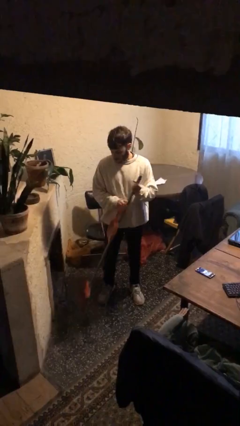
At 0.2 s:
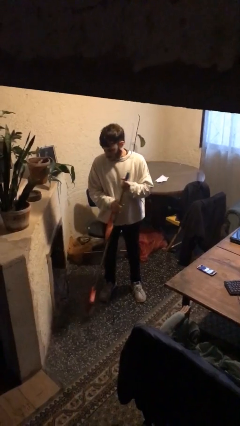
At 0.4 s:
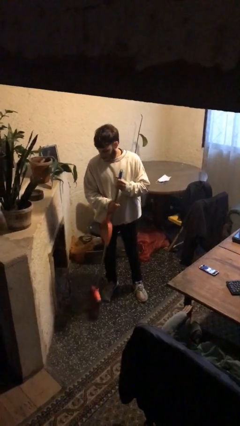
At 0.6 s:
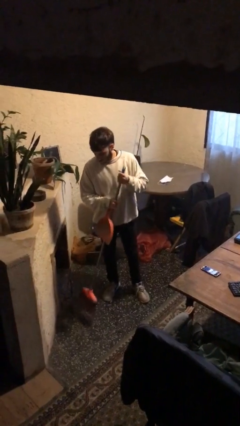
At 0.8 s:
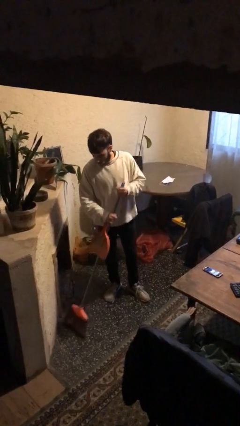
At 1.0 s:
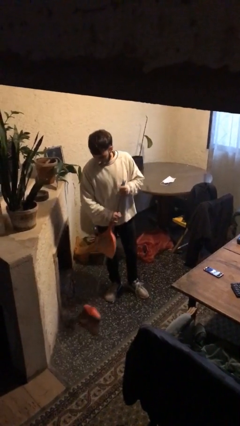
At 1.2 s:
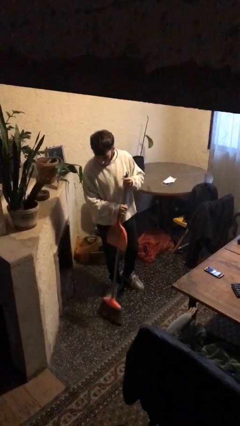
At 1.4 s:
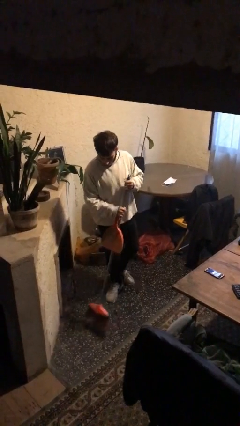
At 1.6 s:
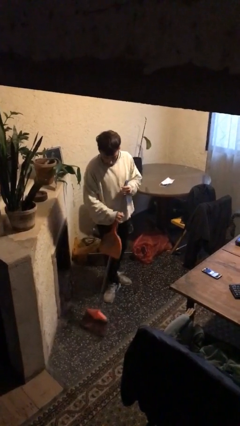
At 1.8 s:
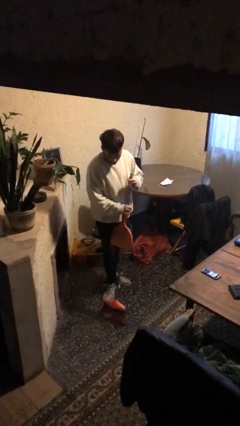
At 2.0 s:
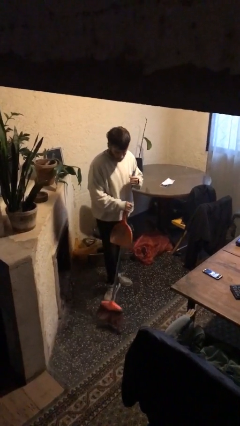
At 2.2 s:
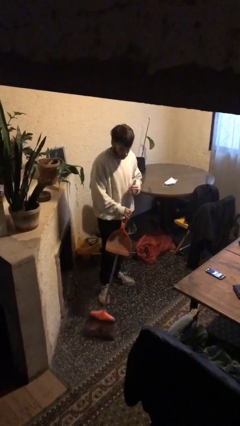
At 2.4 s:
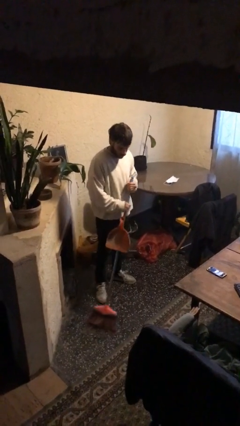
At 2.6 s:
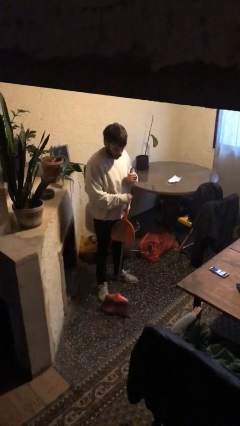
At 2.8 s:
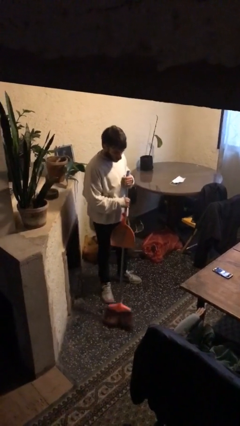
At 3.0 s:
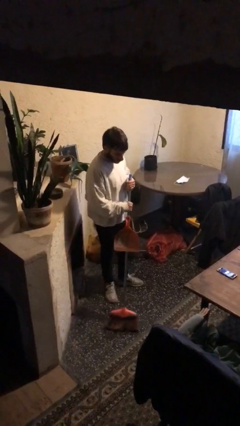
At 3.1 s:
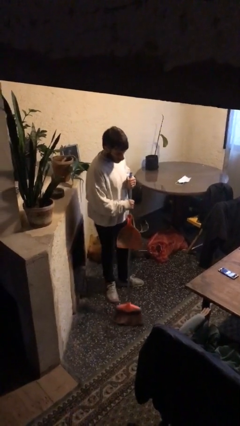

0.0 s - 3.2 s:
person sweeps floor

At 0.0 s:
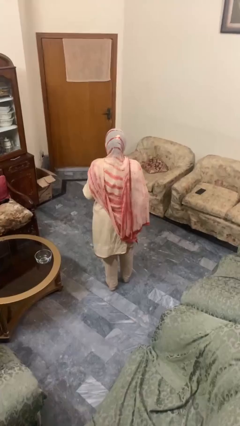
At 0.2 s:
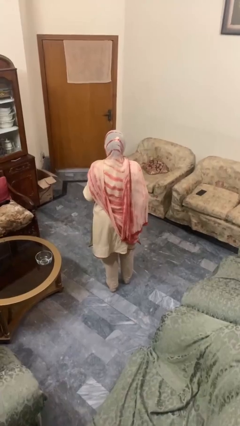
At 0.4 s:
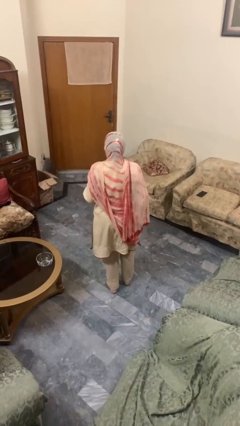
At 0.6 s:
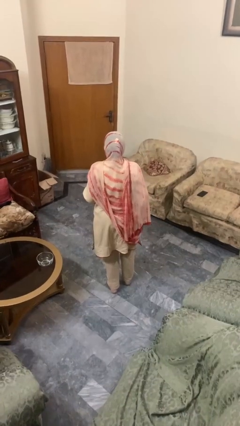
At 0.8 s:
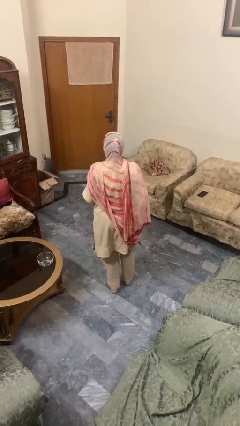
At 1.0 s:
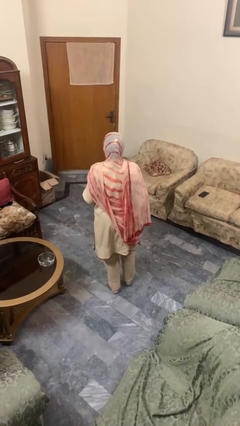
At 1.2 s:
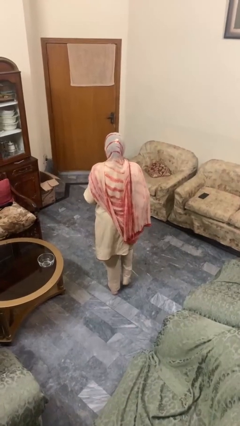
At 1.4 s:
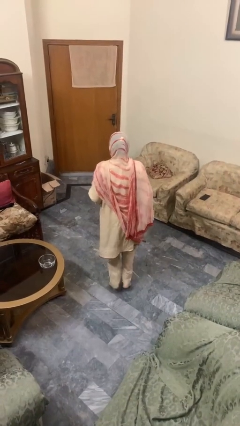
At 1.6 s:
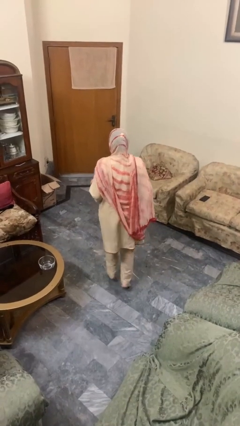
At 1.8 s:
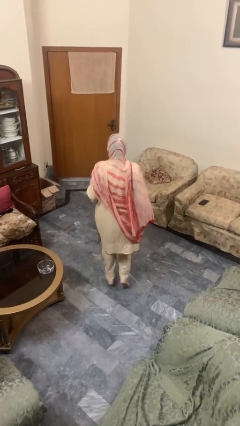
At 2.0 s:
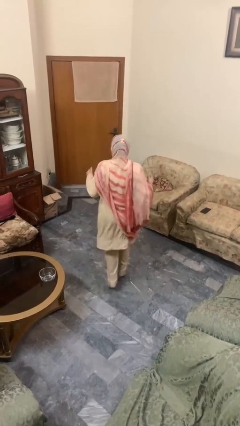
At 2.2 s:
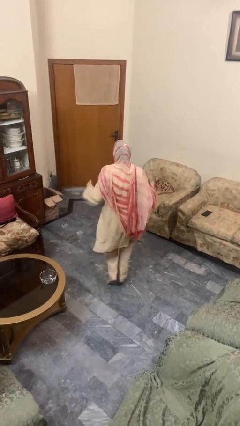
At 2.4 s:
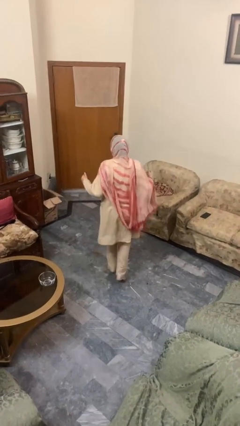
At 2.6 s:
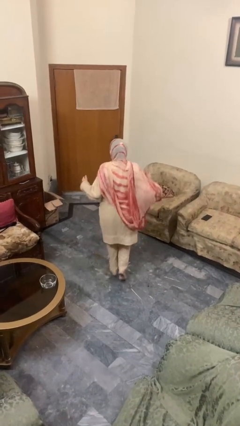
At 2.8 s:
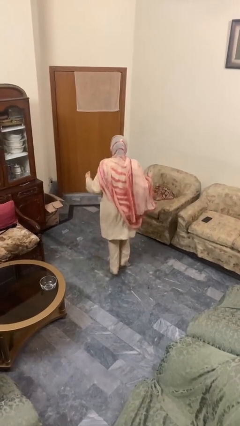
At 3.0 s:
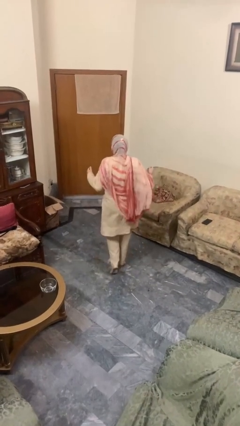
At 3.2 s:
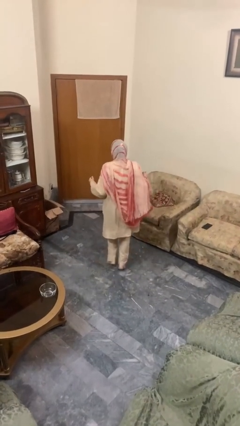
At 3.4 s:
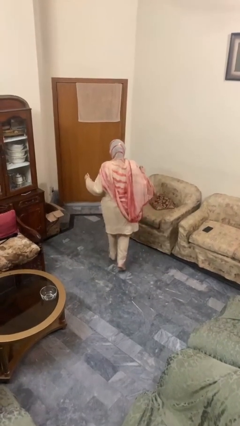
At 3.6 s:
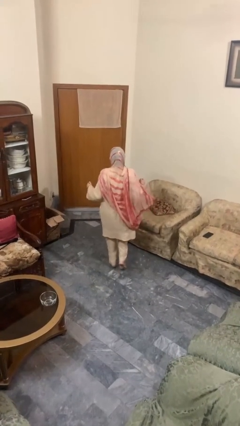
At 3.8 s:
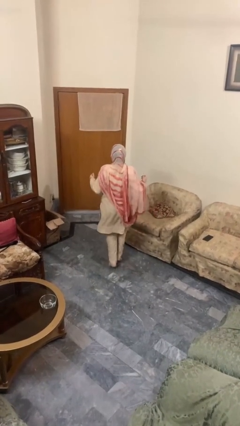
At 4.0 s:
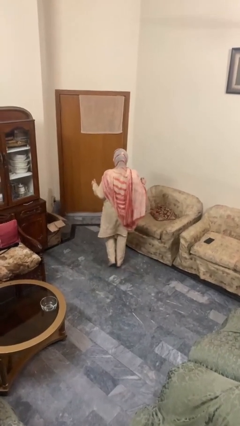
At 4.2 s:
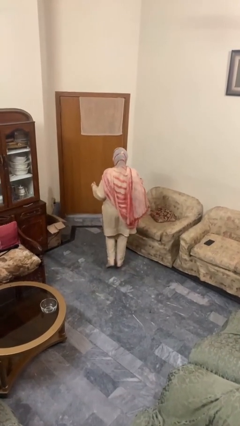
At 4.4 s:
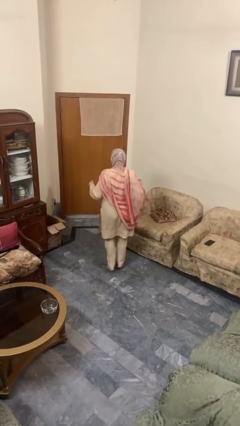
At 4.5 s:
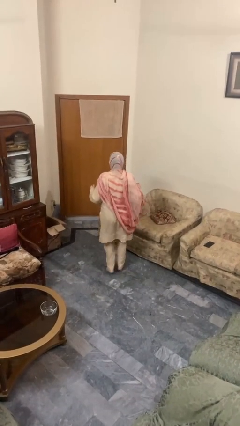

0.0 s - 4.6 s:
person walks tiptoe

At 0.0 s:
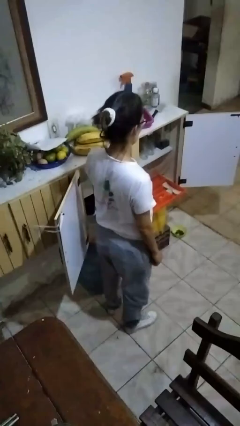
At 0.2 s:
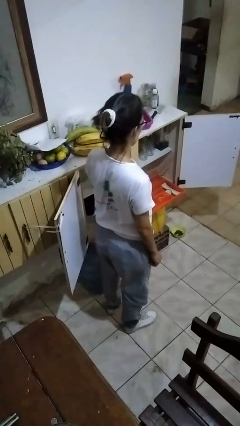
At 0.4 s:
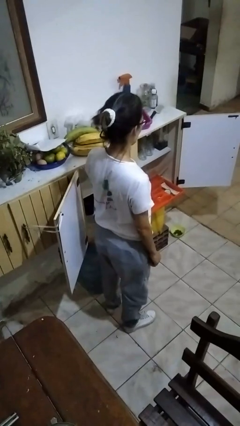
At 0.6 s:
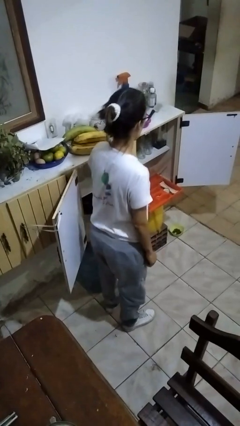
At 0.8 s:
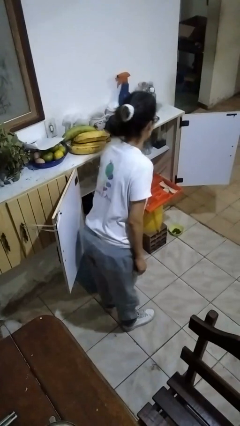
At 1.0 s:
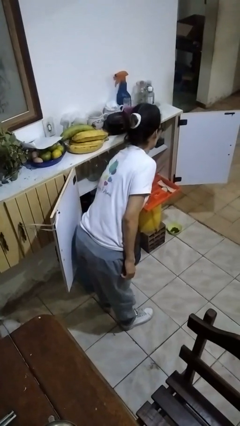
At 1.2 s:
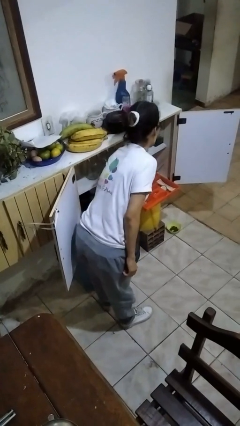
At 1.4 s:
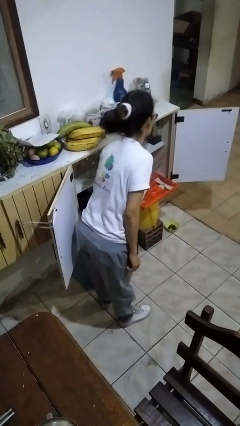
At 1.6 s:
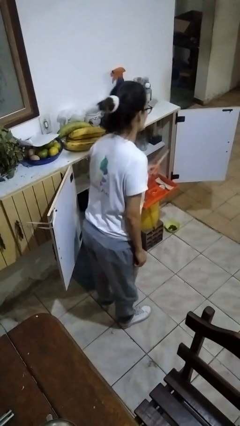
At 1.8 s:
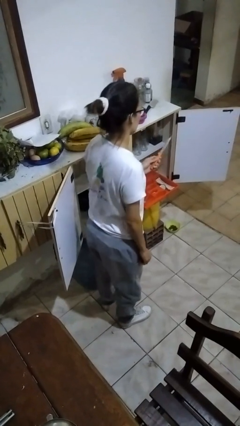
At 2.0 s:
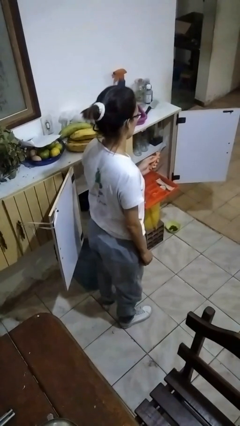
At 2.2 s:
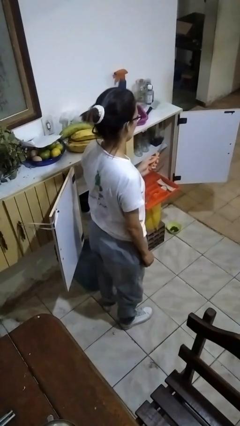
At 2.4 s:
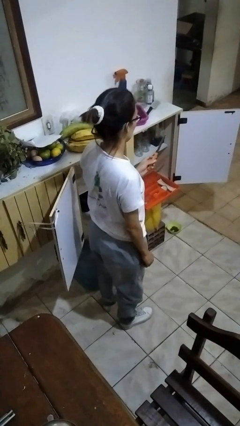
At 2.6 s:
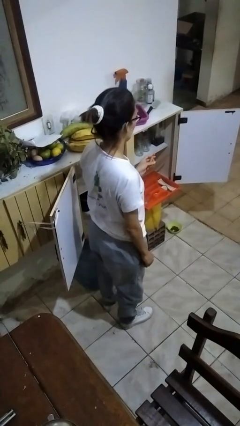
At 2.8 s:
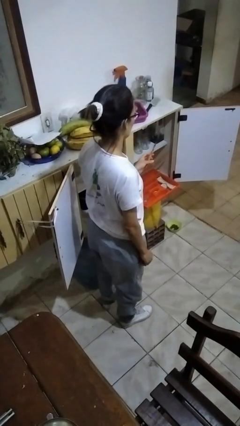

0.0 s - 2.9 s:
person takes object from kitchen drawer

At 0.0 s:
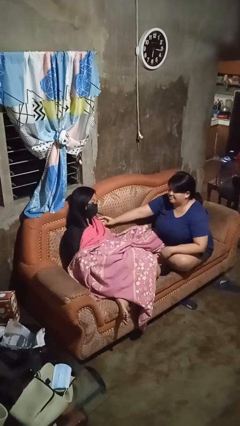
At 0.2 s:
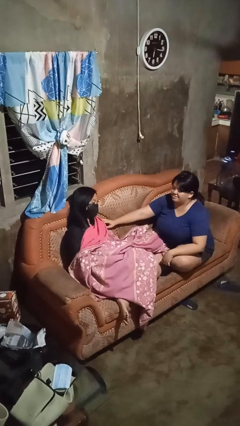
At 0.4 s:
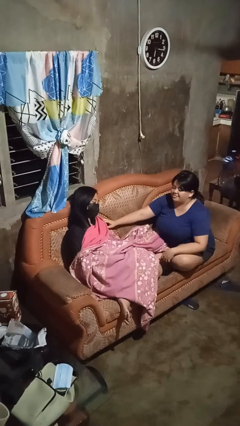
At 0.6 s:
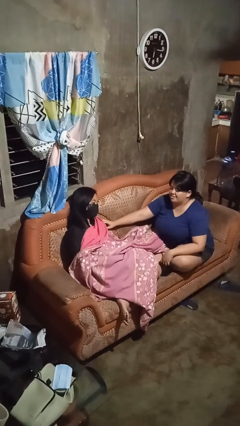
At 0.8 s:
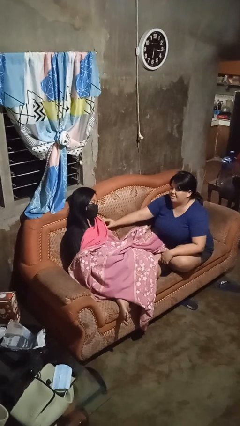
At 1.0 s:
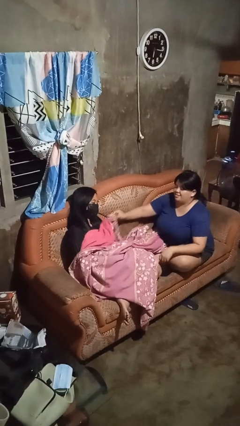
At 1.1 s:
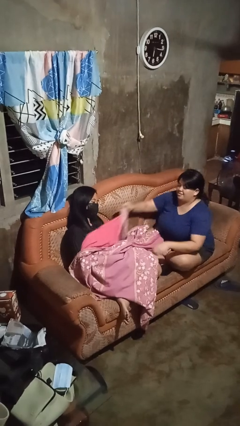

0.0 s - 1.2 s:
person uncovers friend with blanket

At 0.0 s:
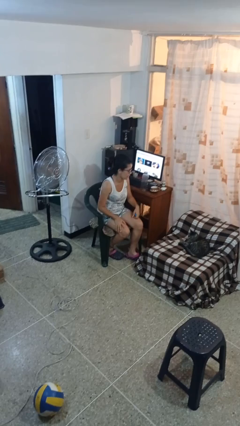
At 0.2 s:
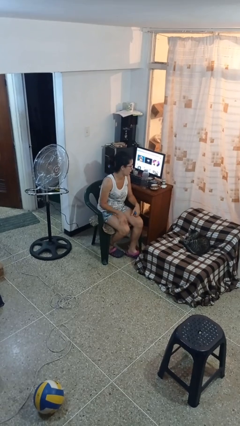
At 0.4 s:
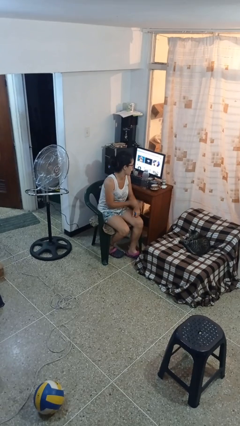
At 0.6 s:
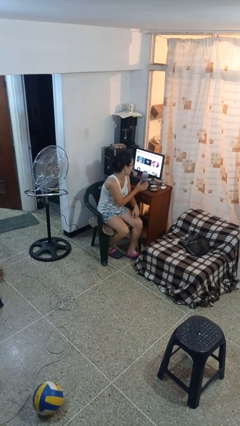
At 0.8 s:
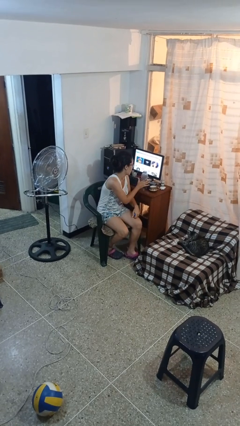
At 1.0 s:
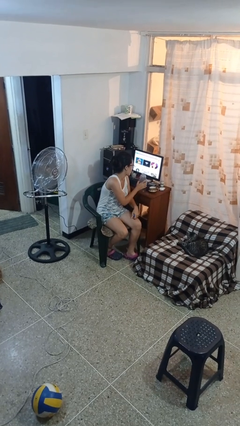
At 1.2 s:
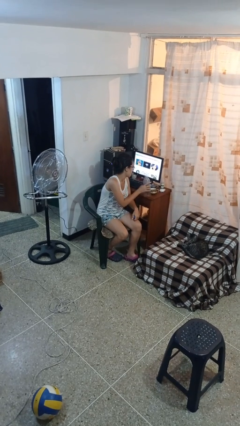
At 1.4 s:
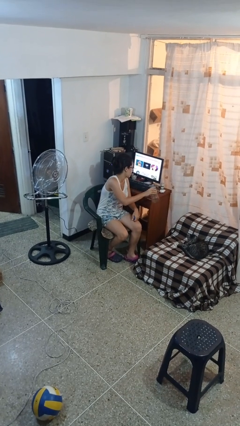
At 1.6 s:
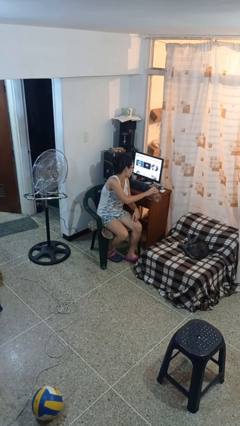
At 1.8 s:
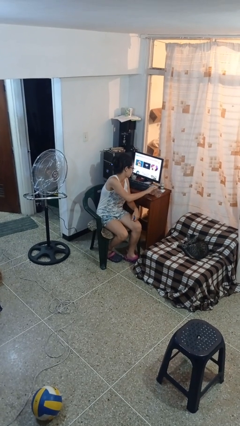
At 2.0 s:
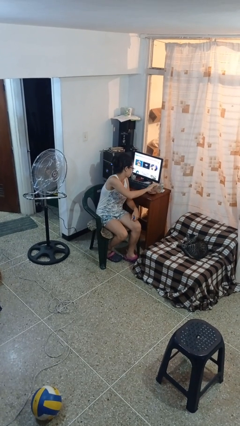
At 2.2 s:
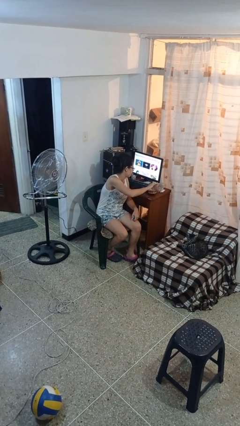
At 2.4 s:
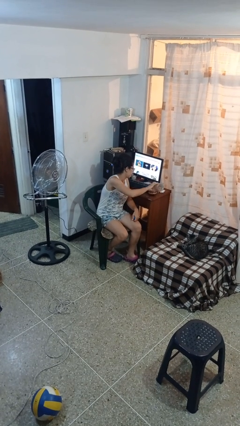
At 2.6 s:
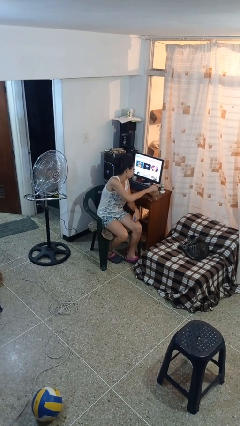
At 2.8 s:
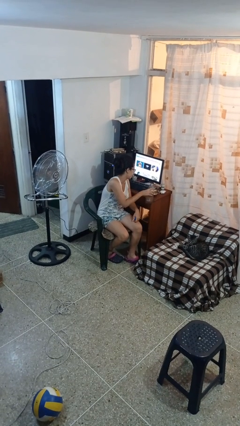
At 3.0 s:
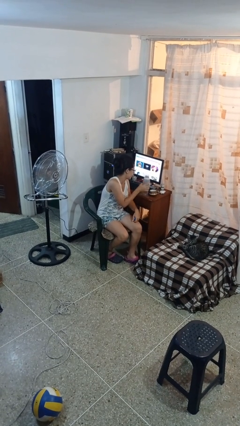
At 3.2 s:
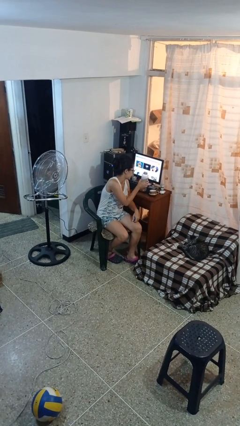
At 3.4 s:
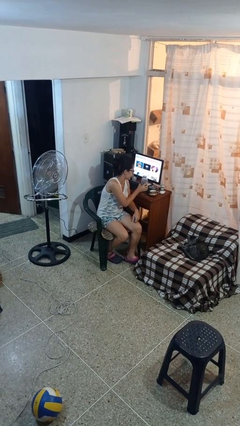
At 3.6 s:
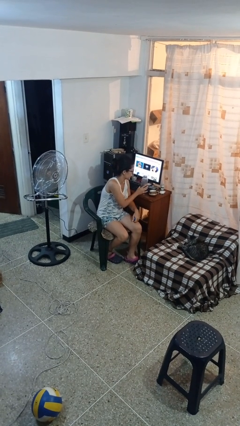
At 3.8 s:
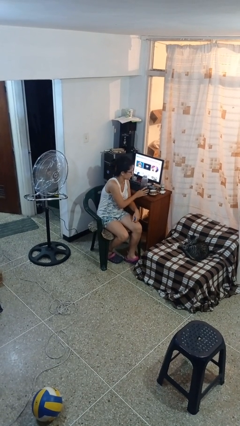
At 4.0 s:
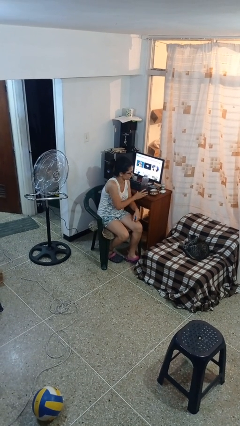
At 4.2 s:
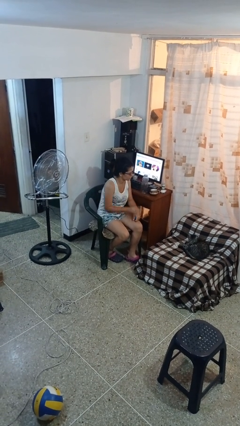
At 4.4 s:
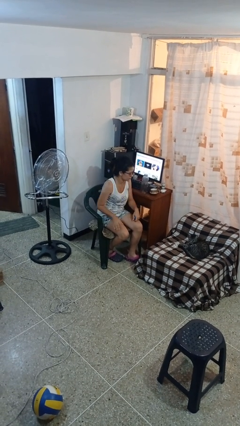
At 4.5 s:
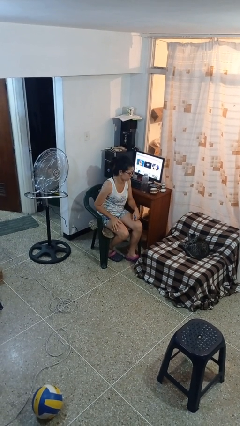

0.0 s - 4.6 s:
person pours liquid into cup

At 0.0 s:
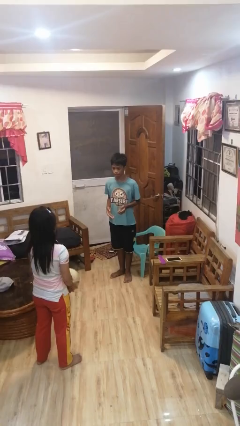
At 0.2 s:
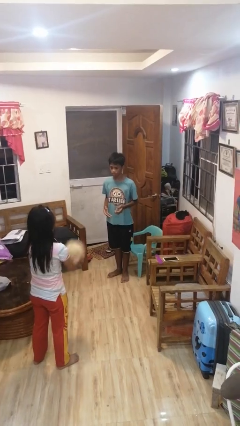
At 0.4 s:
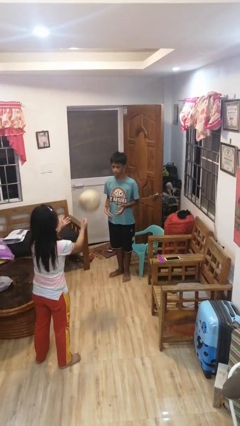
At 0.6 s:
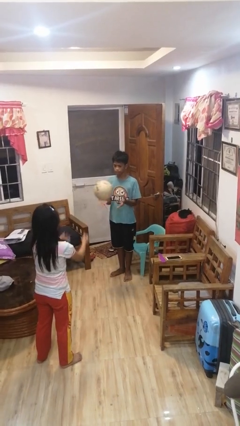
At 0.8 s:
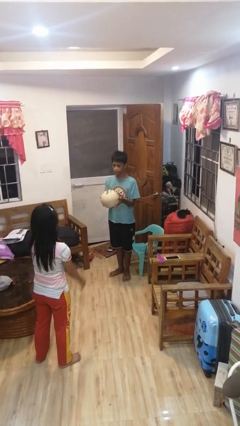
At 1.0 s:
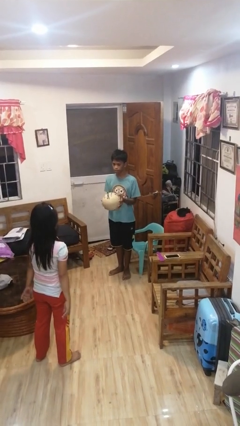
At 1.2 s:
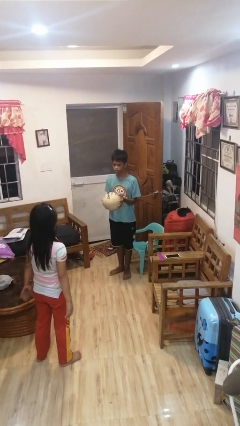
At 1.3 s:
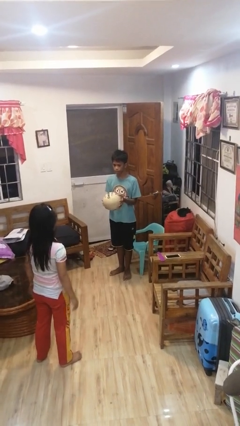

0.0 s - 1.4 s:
person catches object from person
